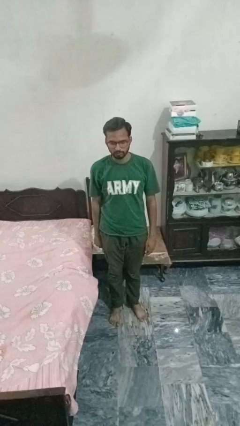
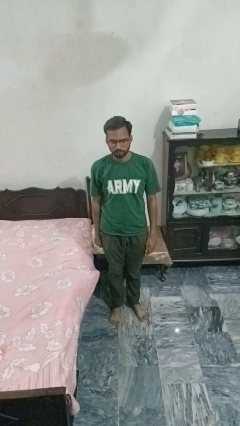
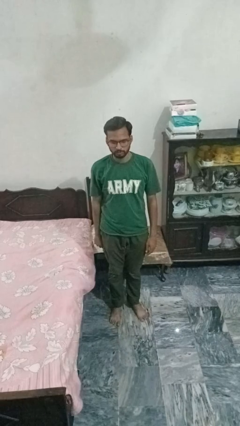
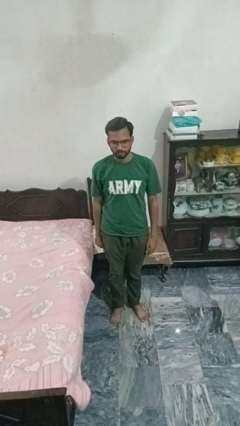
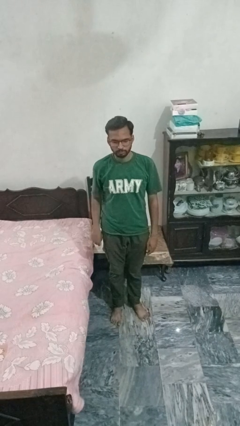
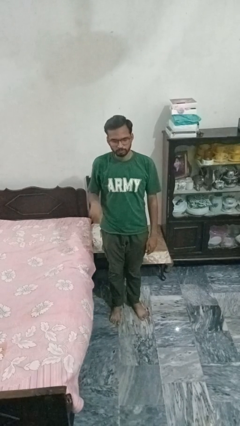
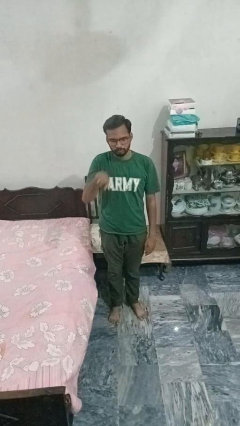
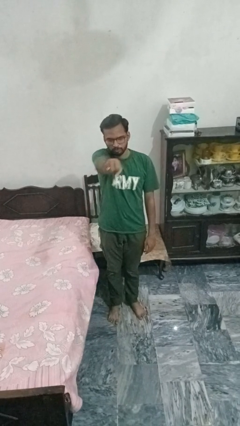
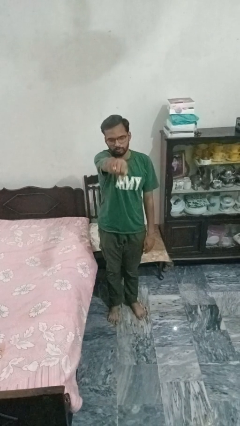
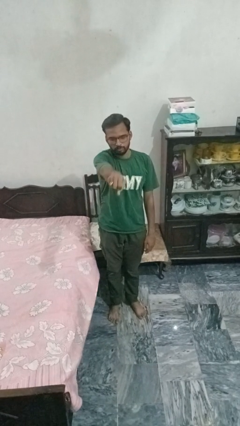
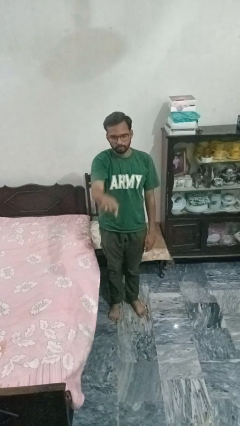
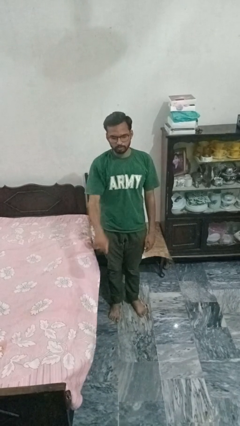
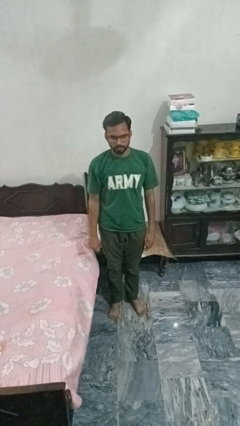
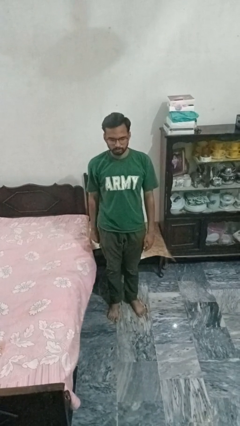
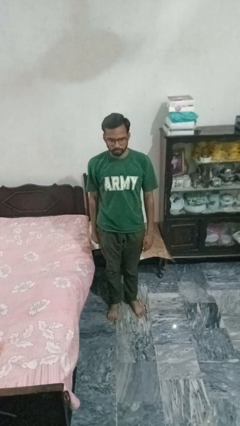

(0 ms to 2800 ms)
person punches

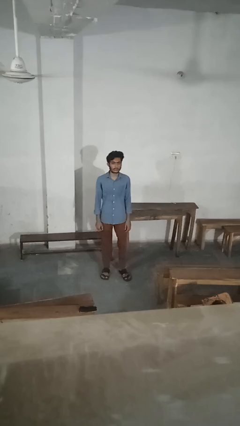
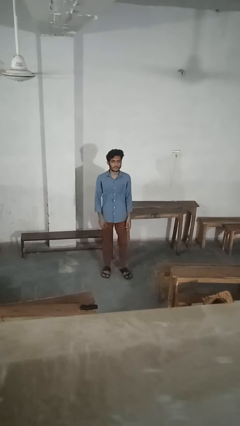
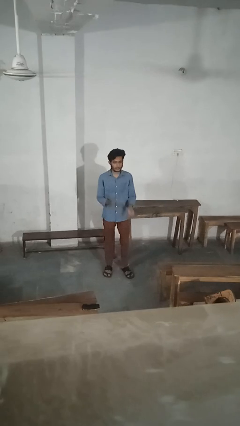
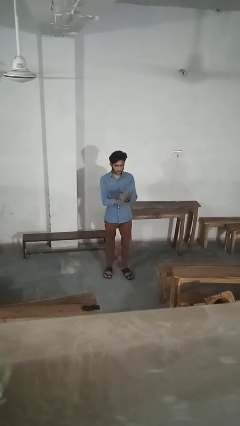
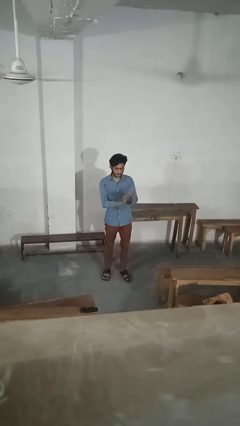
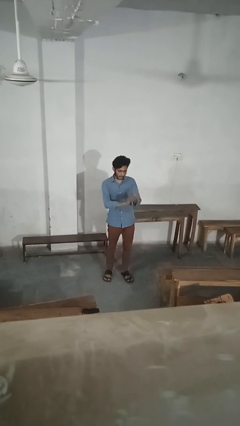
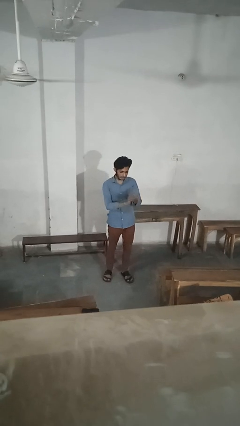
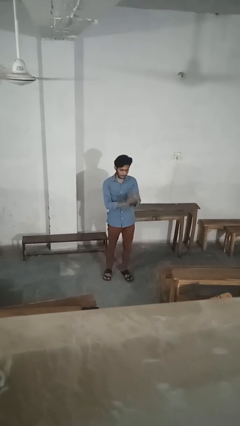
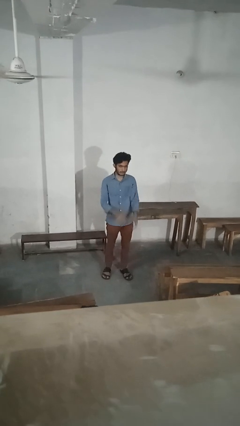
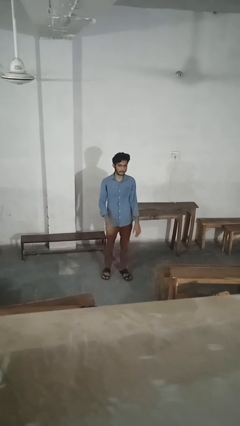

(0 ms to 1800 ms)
person claps hands

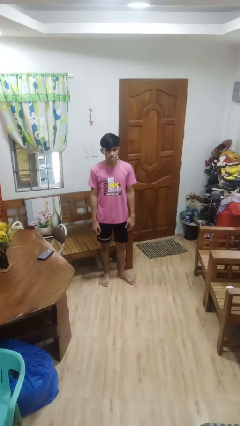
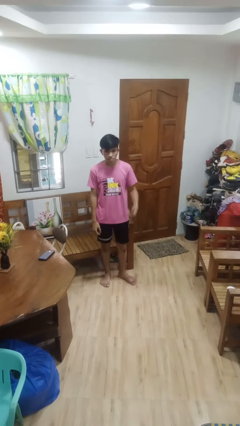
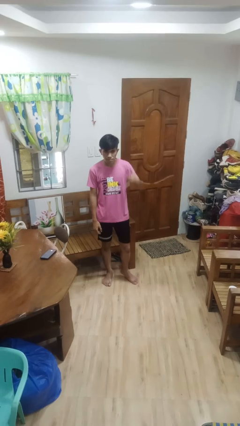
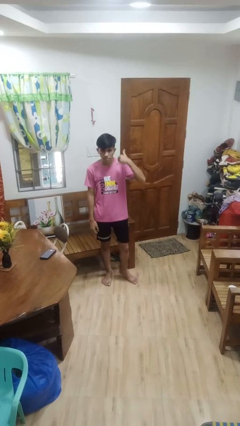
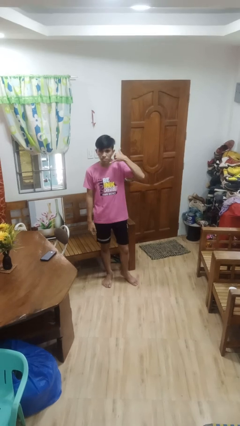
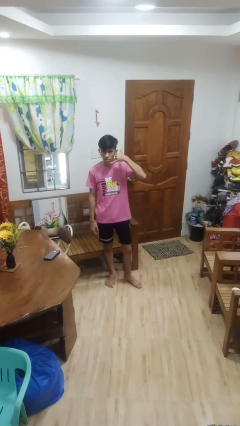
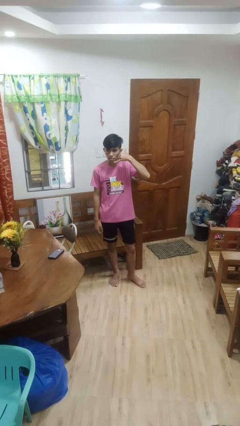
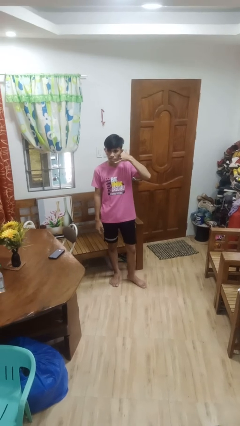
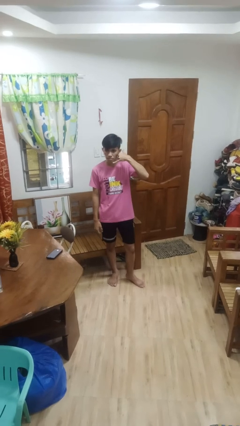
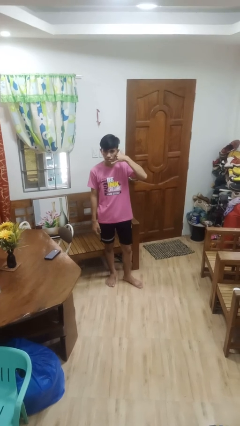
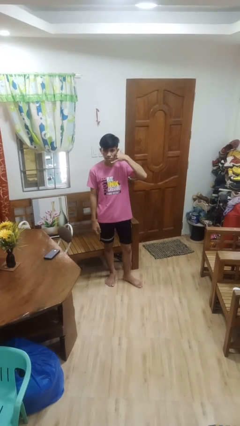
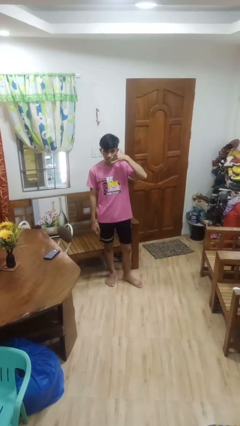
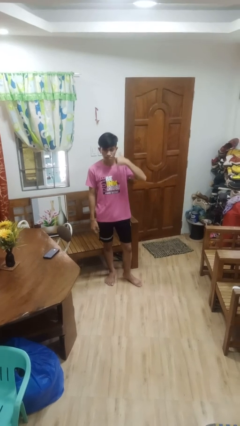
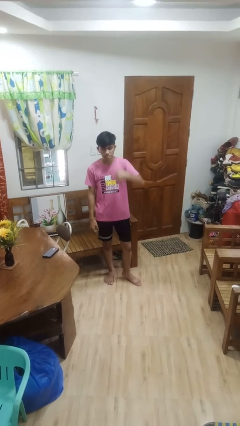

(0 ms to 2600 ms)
person gestures call me

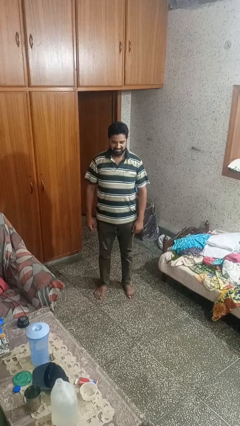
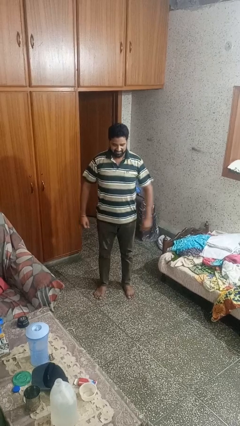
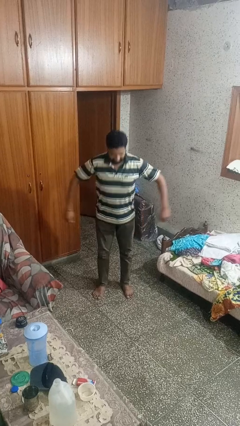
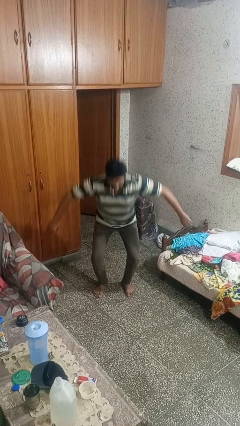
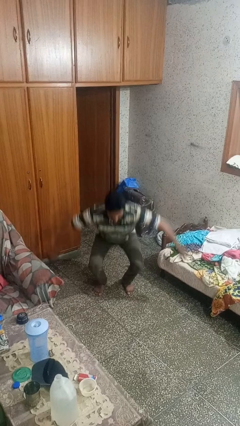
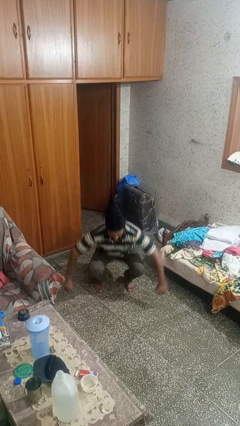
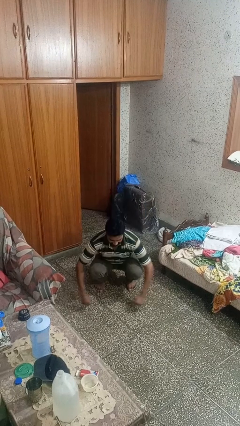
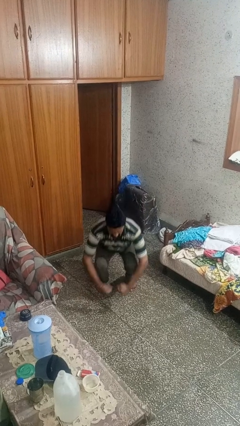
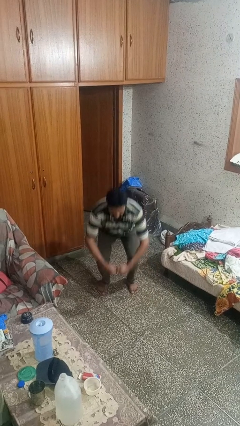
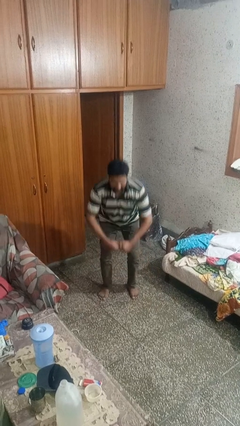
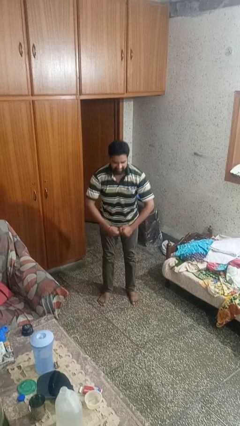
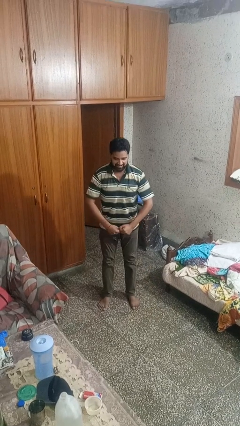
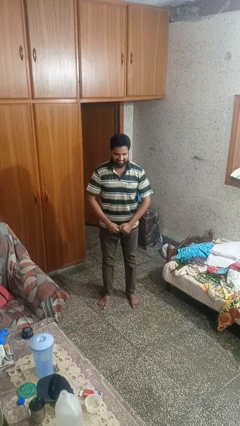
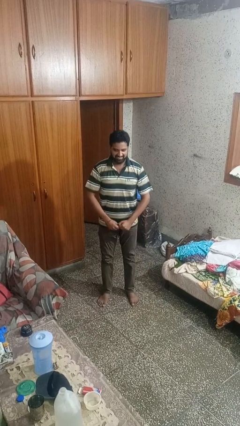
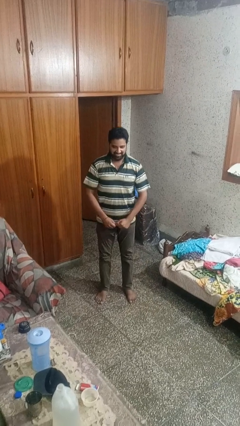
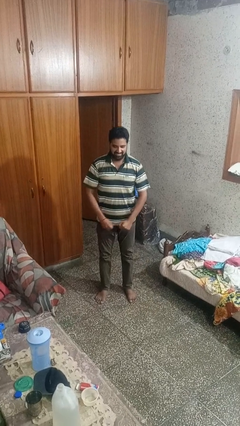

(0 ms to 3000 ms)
person exercises with situp

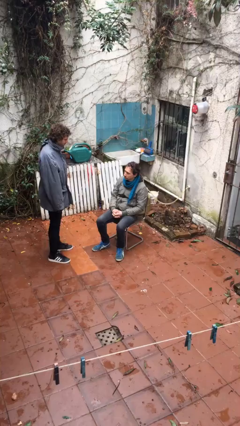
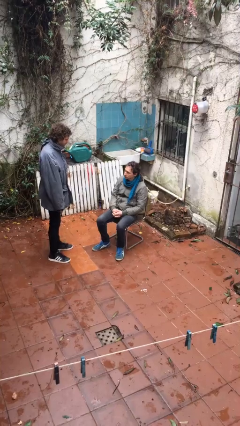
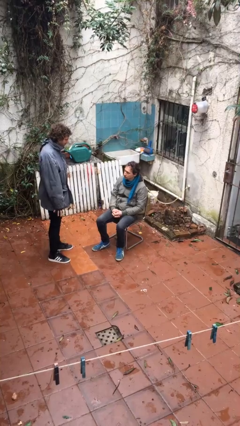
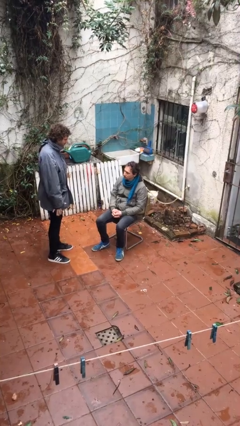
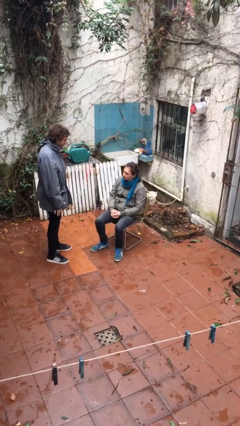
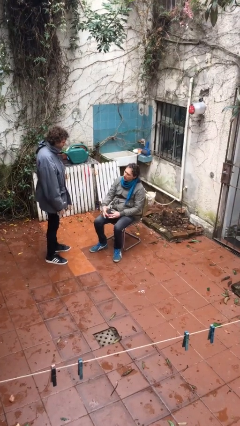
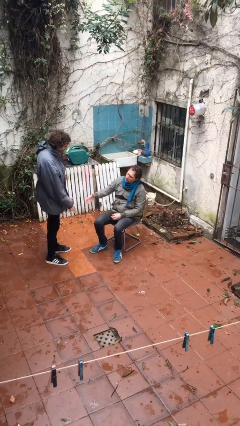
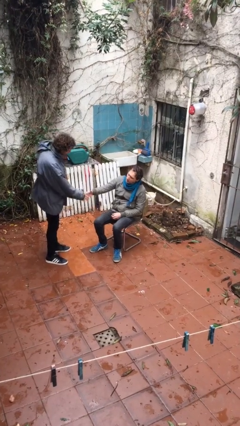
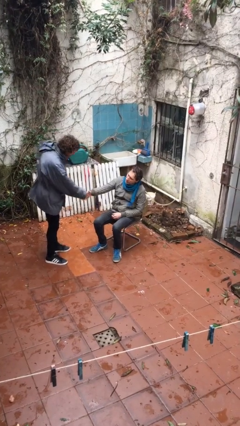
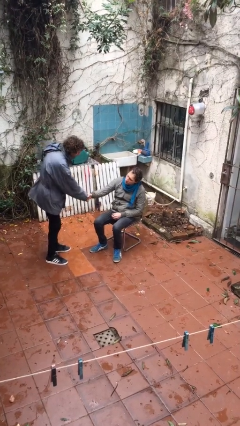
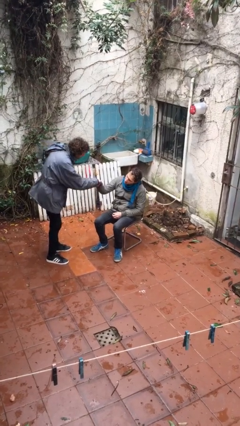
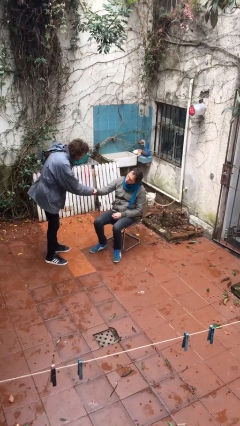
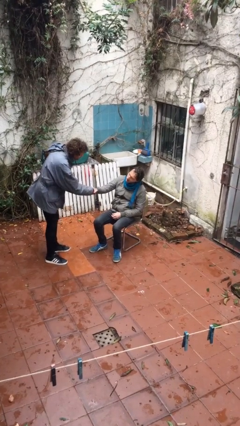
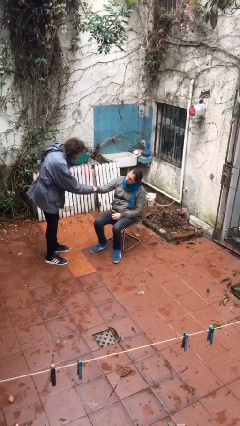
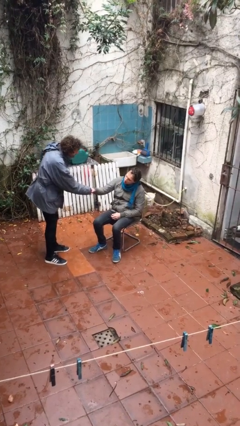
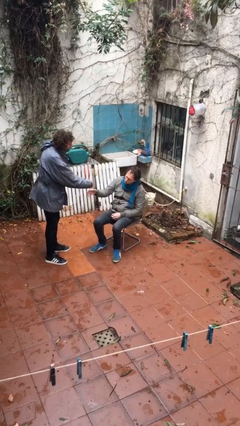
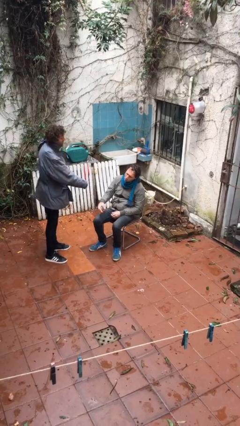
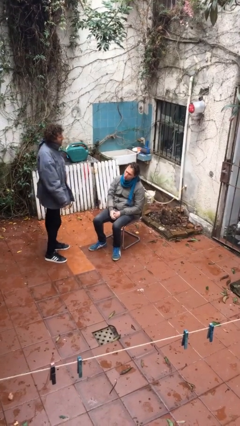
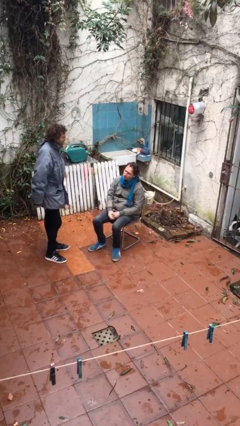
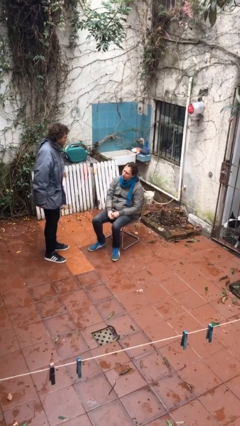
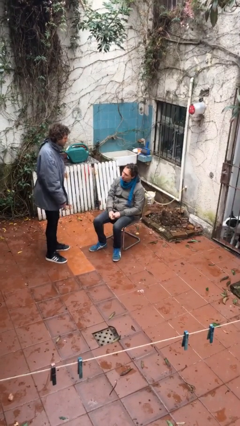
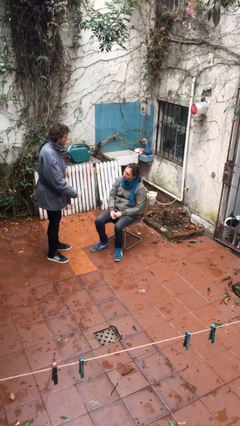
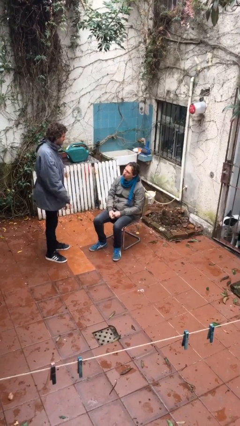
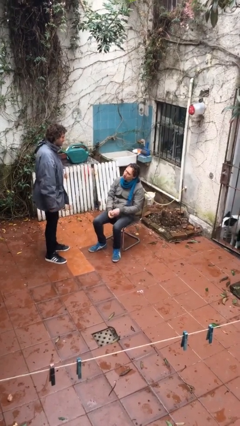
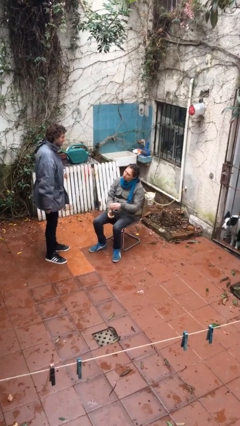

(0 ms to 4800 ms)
person shakes hand

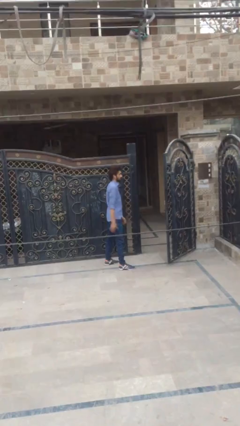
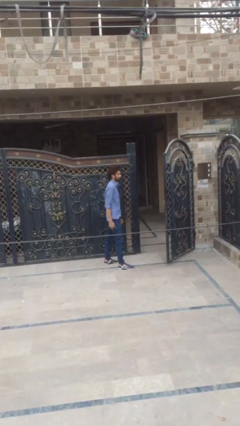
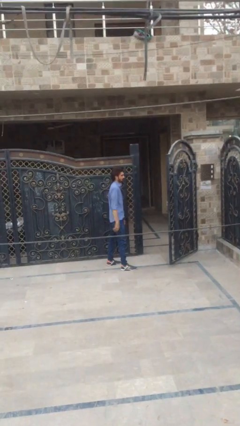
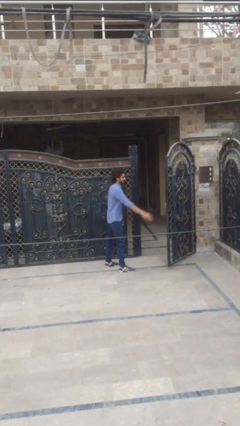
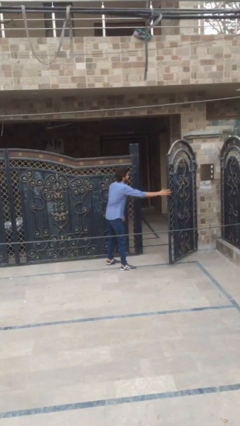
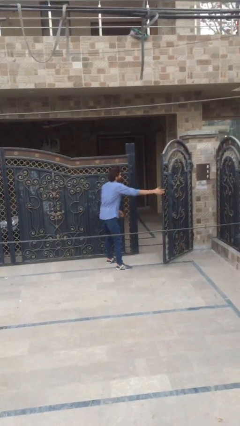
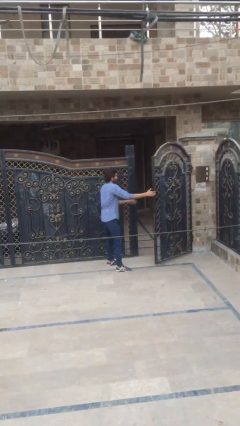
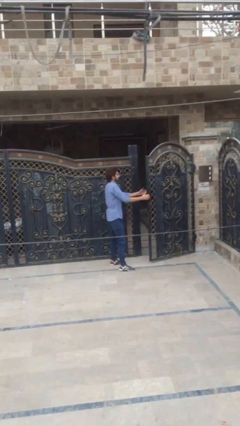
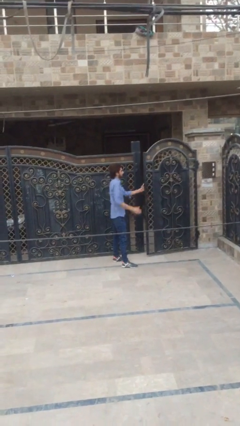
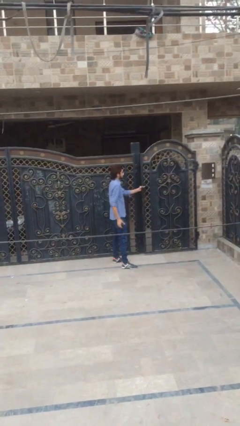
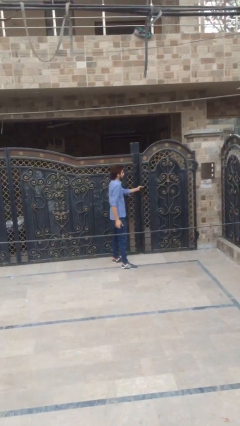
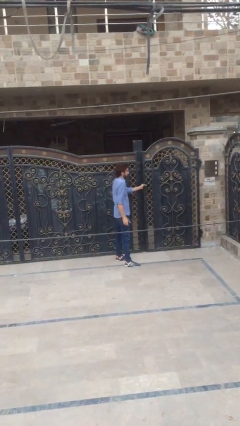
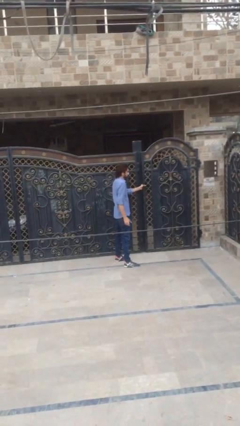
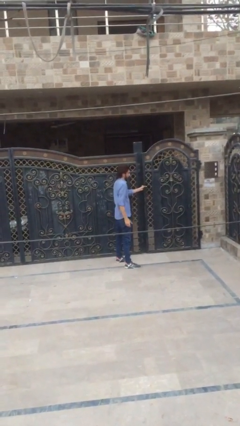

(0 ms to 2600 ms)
person closes facility door
